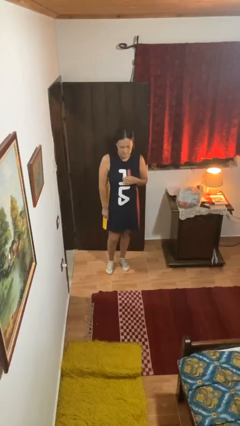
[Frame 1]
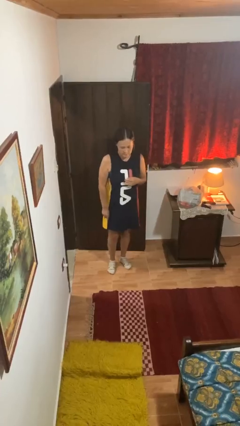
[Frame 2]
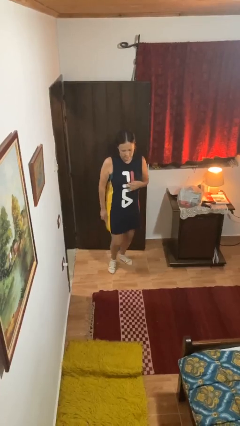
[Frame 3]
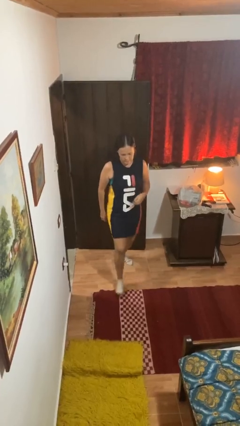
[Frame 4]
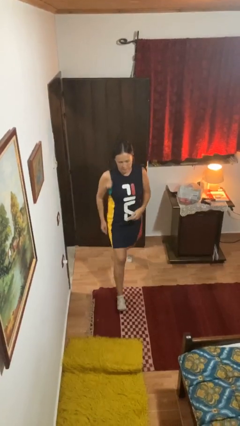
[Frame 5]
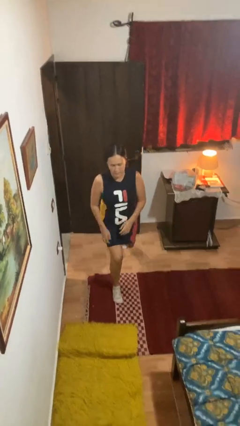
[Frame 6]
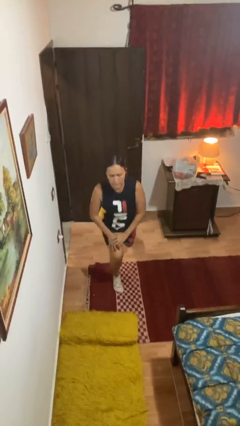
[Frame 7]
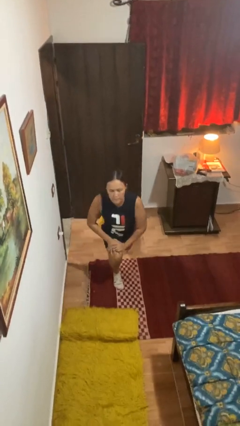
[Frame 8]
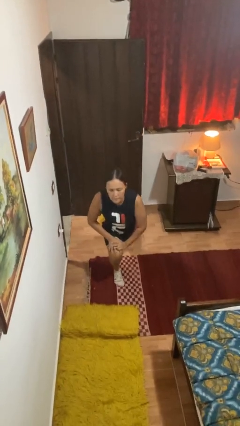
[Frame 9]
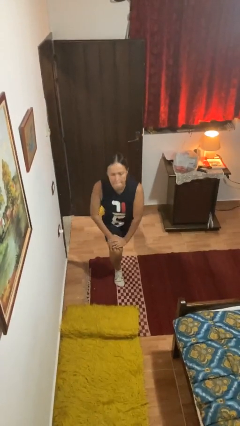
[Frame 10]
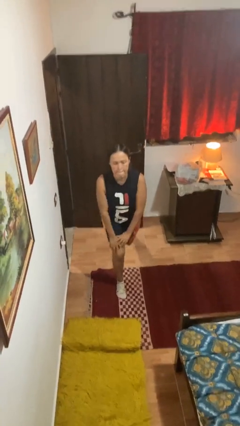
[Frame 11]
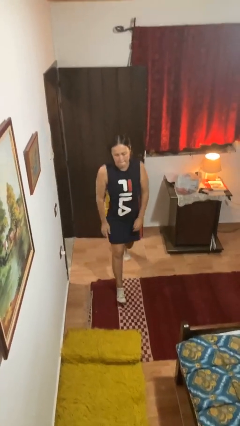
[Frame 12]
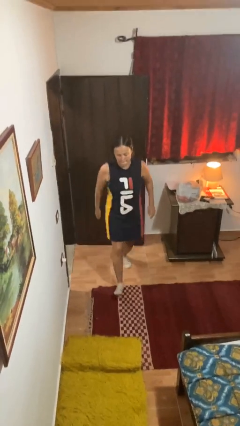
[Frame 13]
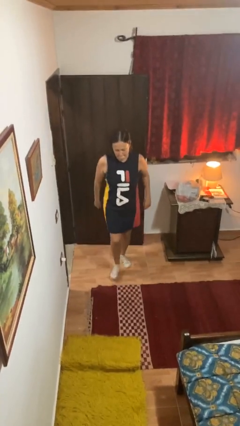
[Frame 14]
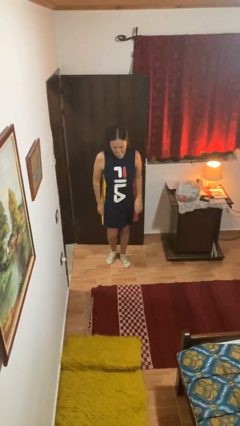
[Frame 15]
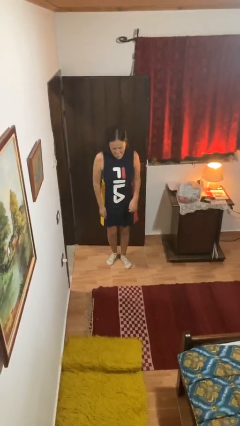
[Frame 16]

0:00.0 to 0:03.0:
person exercises with lunges

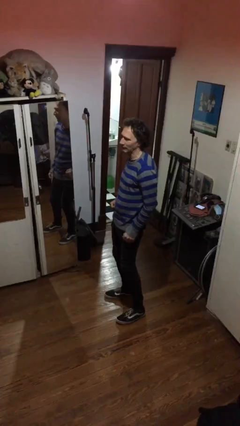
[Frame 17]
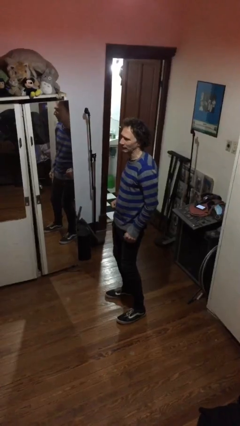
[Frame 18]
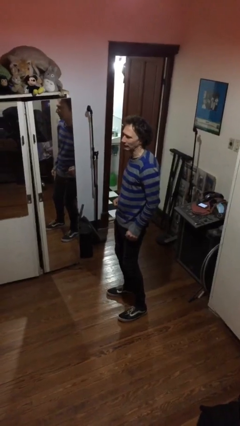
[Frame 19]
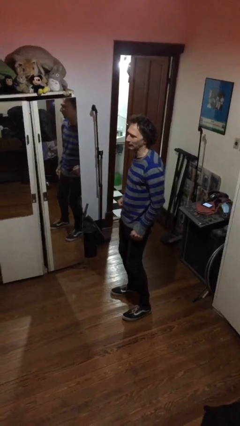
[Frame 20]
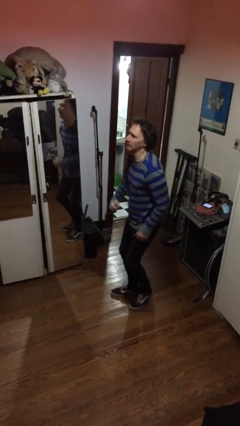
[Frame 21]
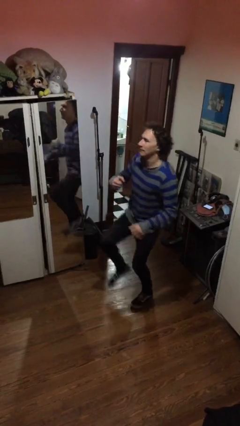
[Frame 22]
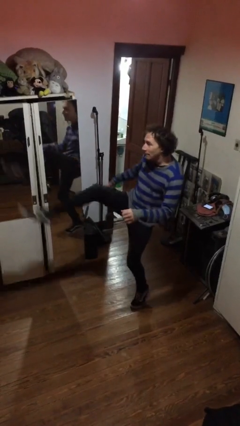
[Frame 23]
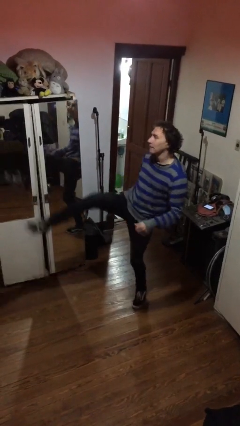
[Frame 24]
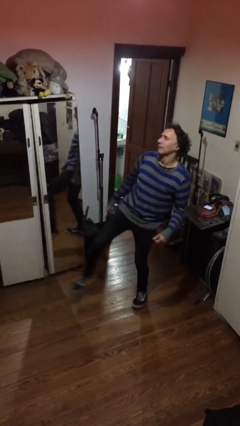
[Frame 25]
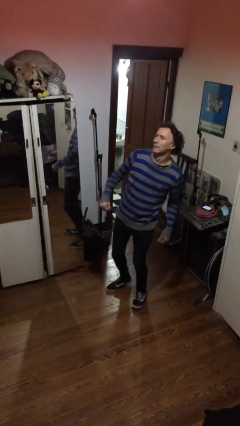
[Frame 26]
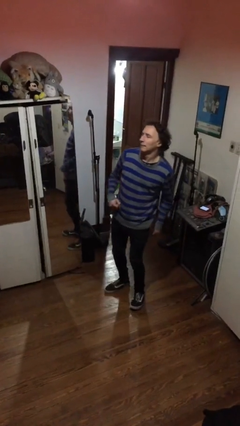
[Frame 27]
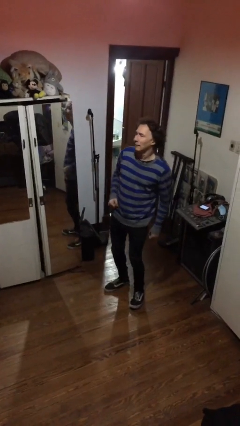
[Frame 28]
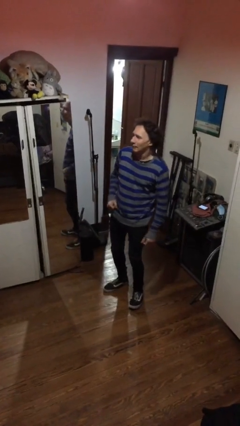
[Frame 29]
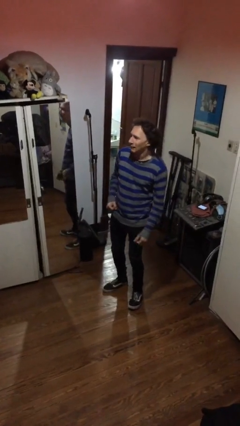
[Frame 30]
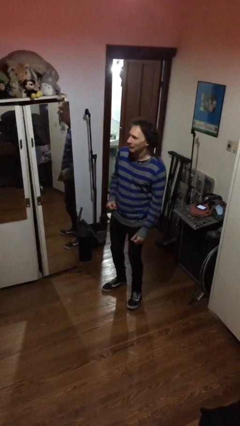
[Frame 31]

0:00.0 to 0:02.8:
person karate kicks

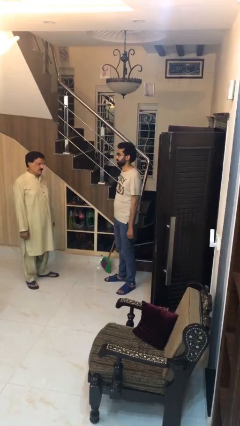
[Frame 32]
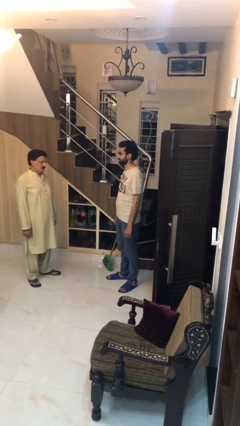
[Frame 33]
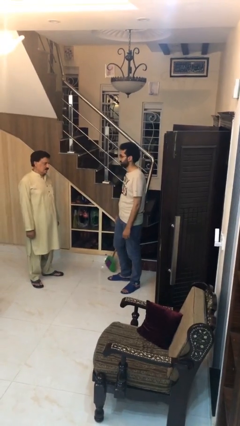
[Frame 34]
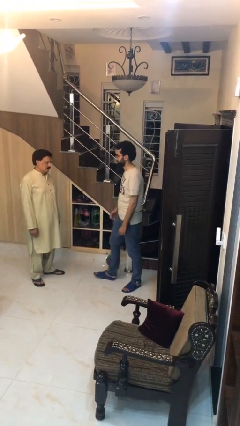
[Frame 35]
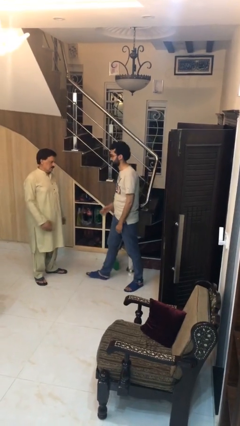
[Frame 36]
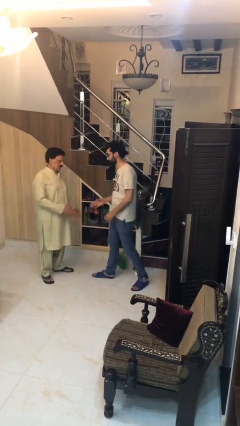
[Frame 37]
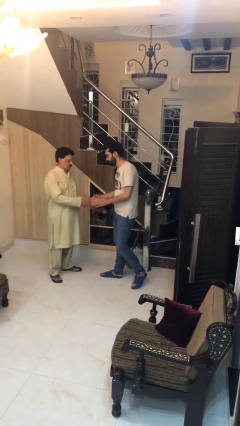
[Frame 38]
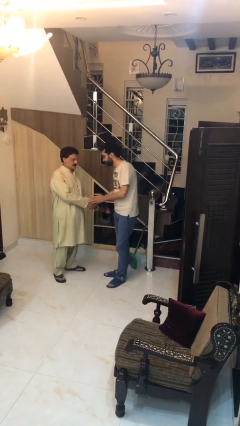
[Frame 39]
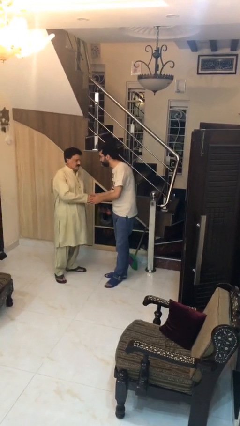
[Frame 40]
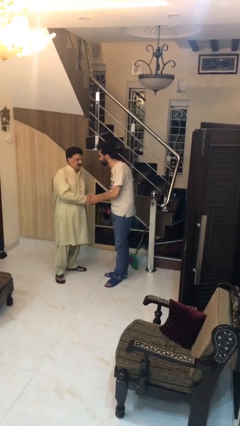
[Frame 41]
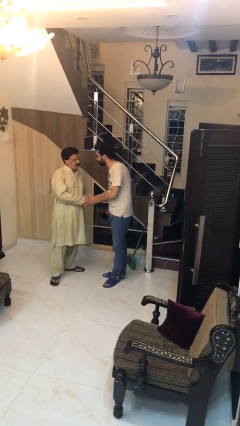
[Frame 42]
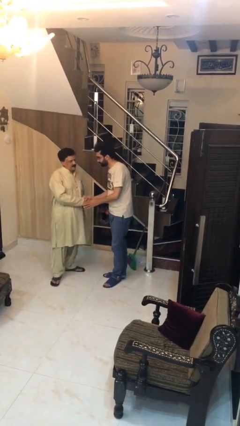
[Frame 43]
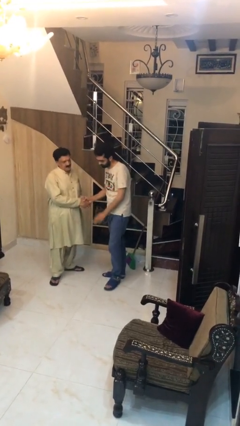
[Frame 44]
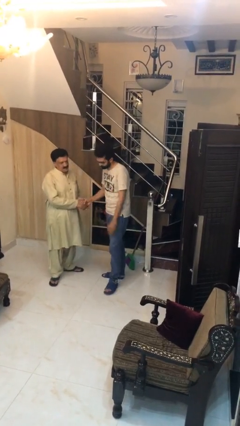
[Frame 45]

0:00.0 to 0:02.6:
person shakes hand

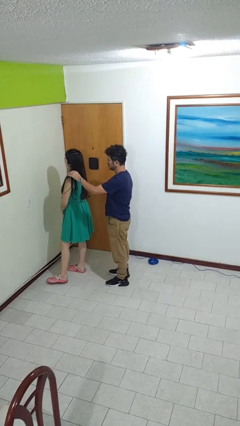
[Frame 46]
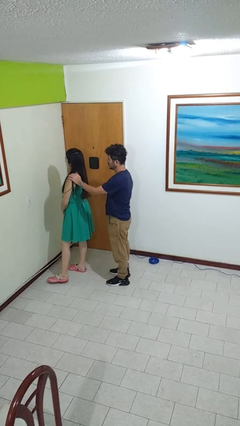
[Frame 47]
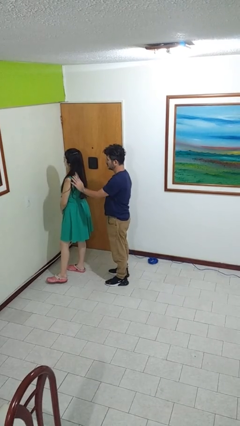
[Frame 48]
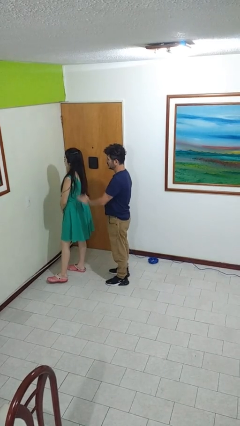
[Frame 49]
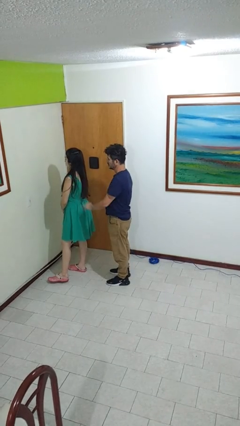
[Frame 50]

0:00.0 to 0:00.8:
person touches back of person

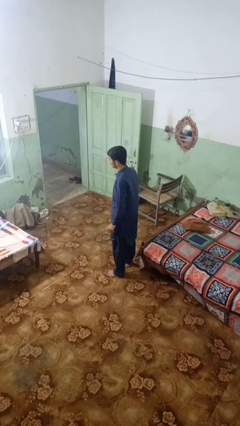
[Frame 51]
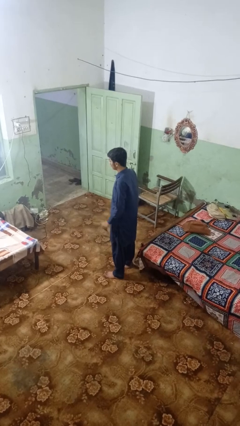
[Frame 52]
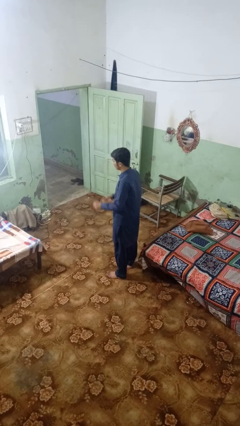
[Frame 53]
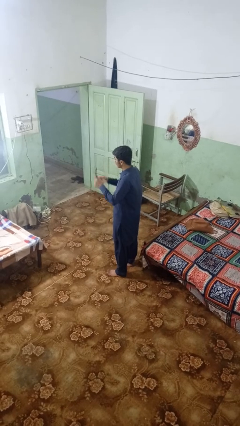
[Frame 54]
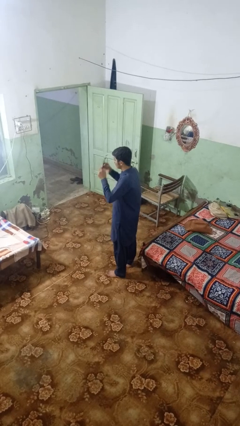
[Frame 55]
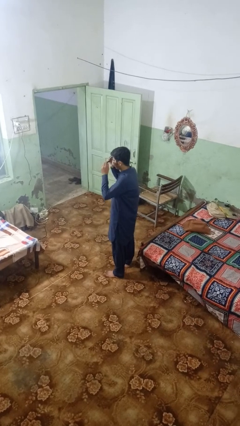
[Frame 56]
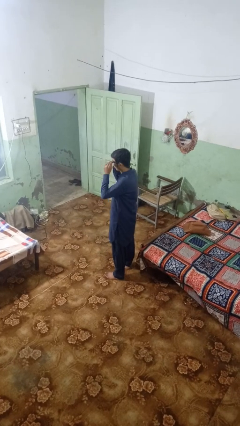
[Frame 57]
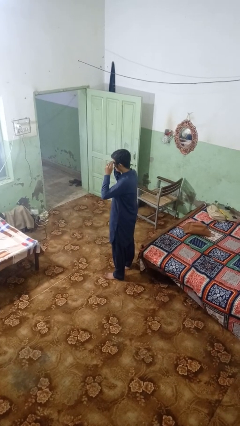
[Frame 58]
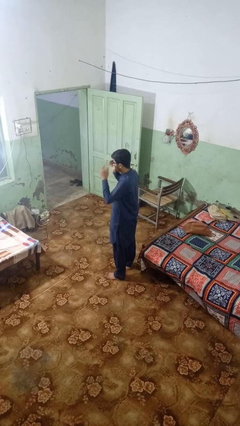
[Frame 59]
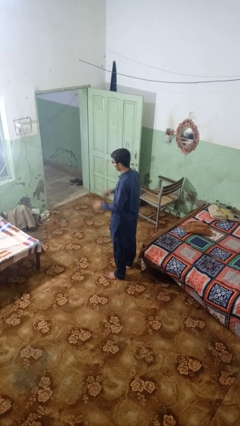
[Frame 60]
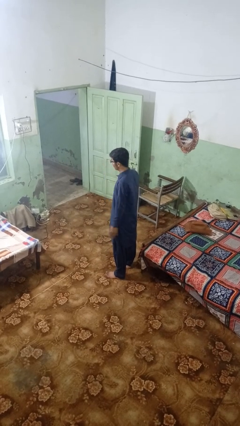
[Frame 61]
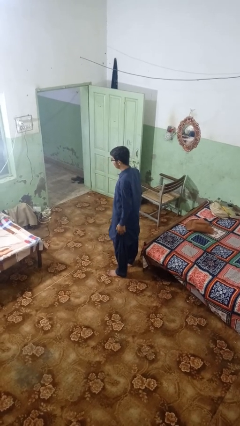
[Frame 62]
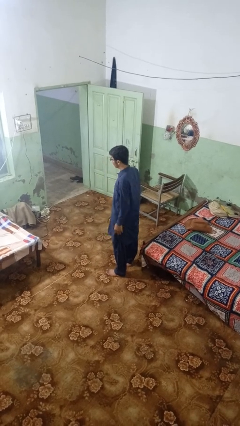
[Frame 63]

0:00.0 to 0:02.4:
person puts on glasses

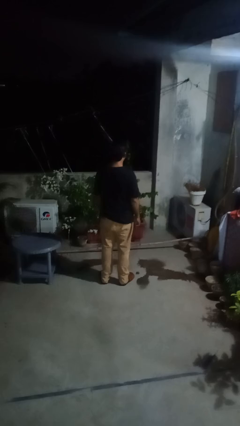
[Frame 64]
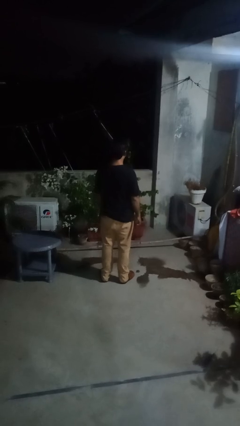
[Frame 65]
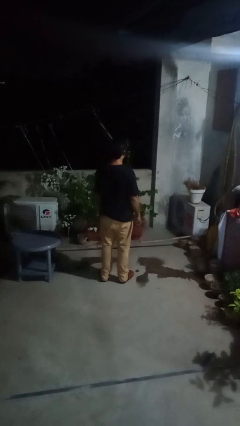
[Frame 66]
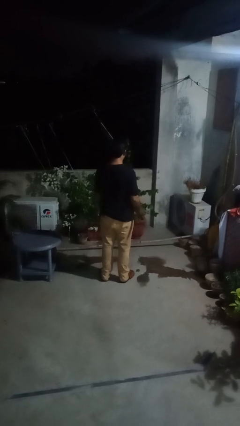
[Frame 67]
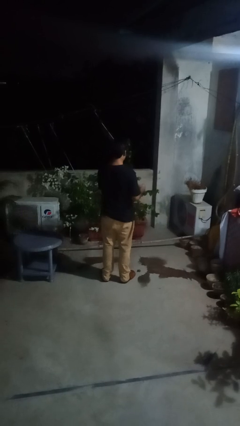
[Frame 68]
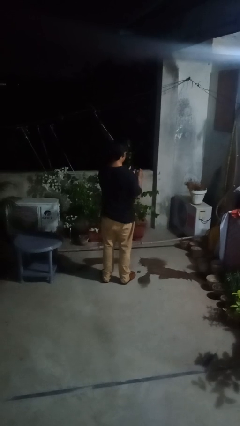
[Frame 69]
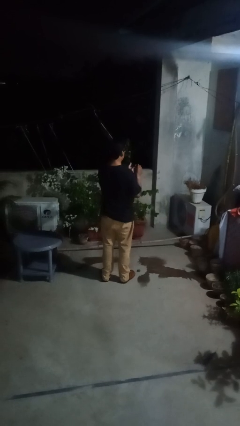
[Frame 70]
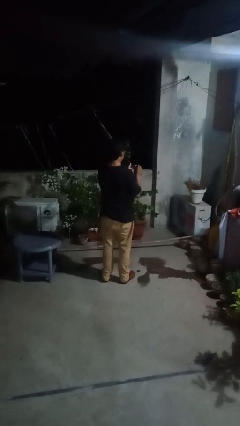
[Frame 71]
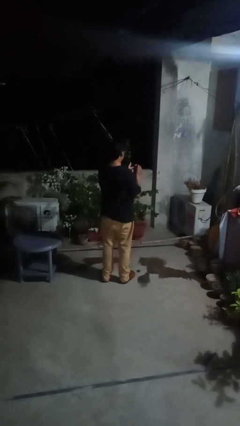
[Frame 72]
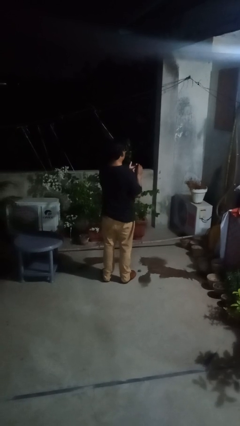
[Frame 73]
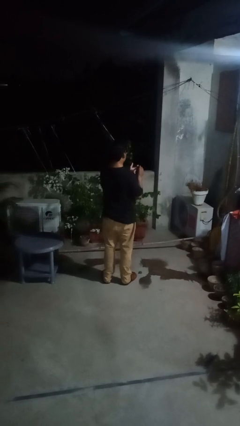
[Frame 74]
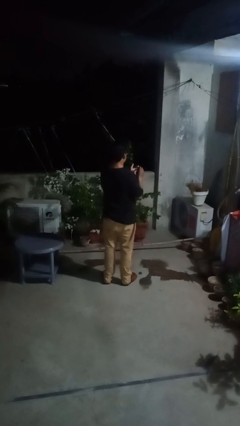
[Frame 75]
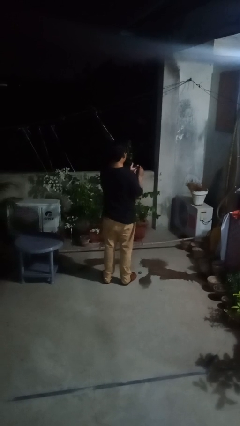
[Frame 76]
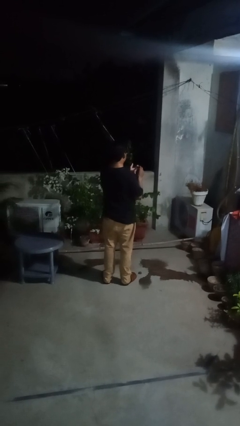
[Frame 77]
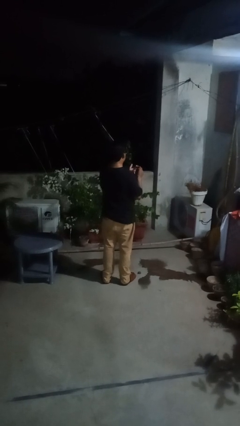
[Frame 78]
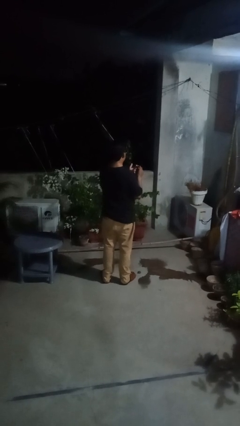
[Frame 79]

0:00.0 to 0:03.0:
person clips fingernails

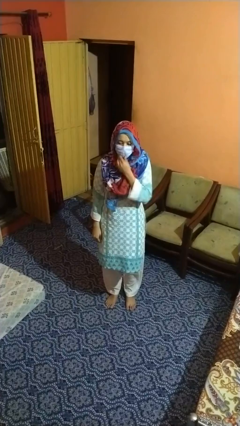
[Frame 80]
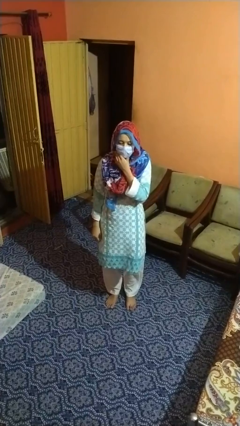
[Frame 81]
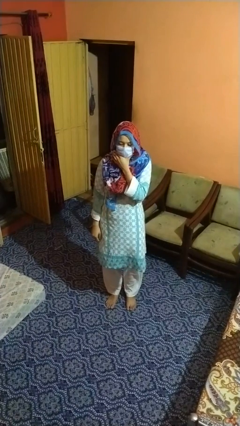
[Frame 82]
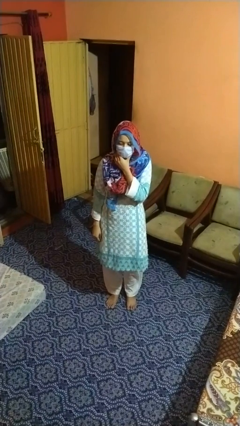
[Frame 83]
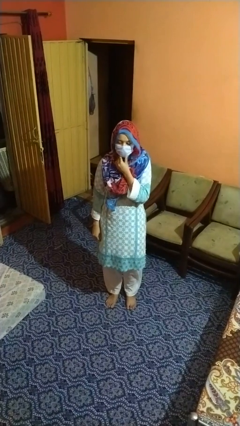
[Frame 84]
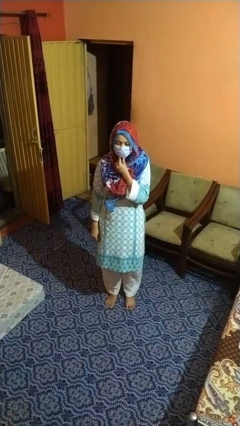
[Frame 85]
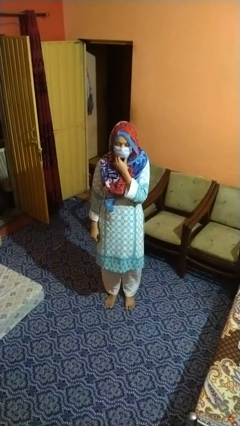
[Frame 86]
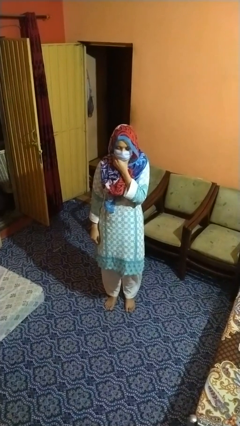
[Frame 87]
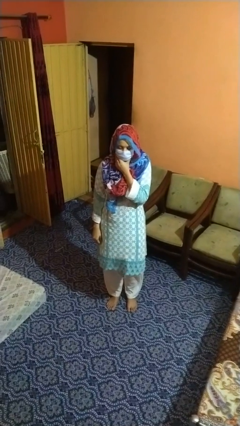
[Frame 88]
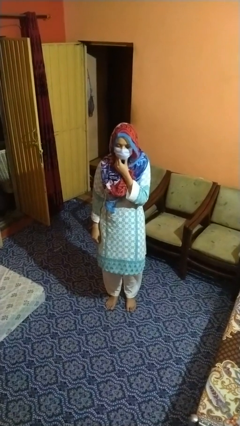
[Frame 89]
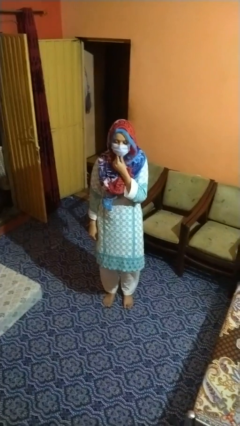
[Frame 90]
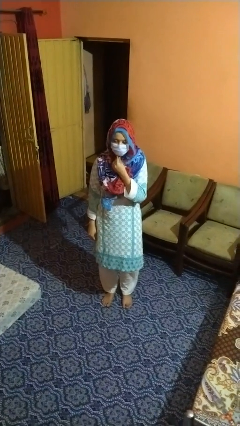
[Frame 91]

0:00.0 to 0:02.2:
person strokes chin
